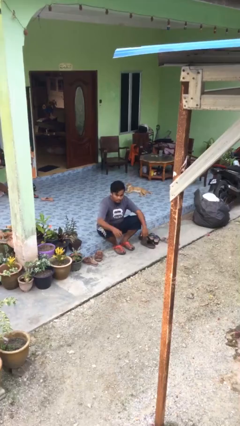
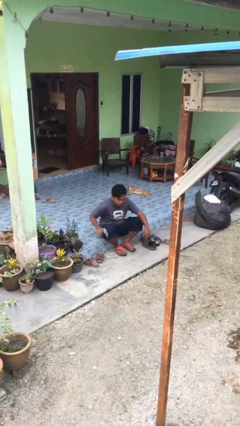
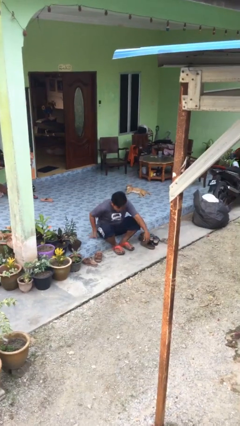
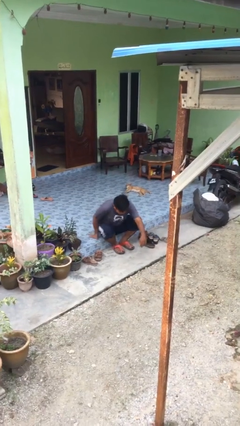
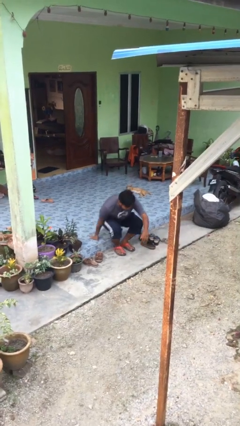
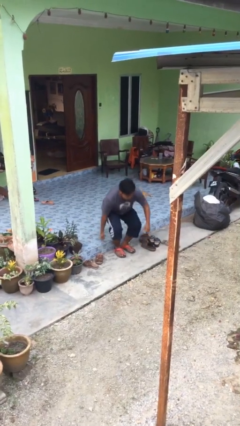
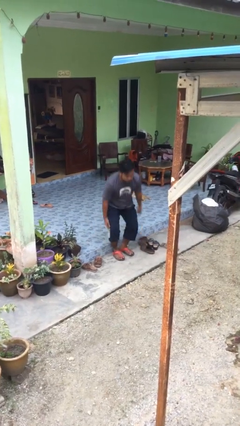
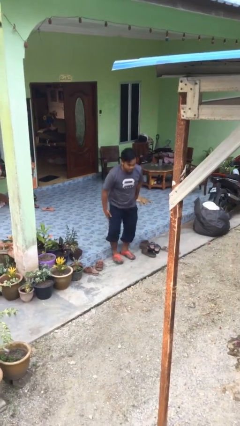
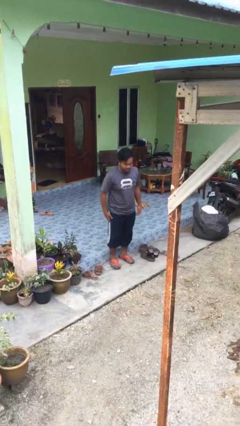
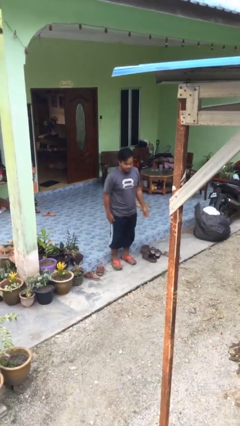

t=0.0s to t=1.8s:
person stands up

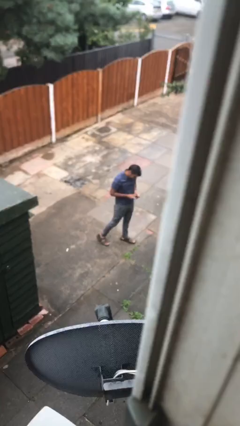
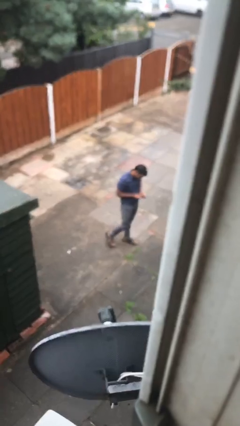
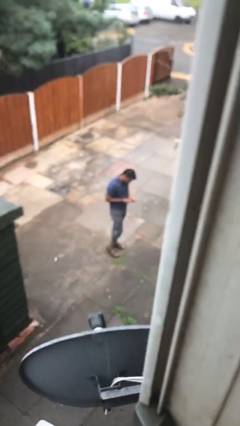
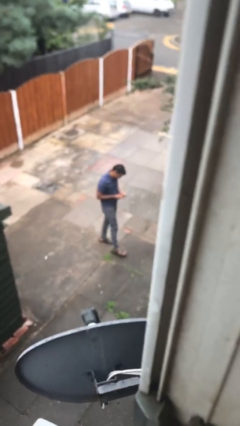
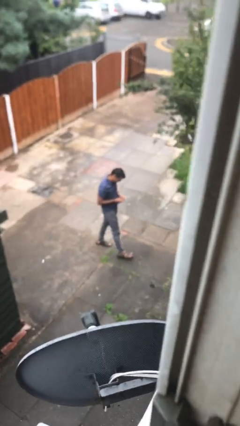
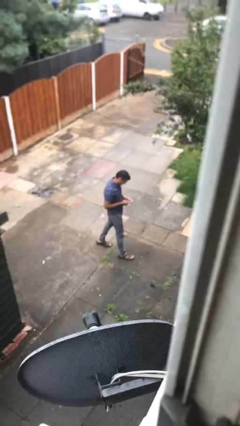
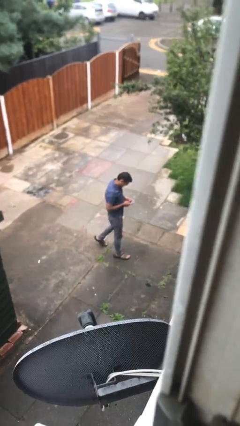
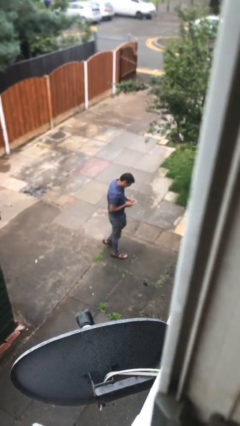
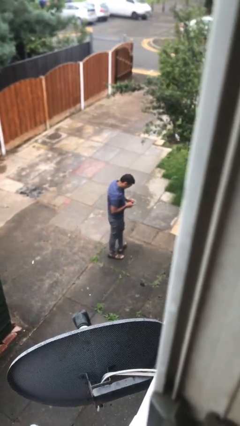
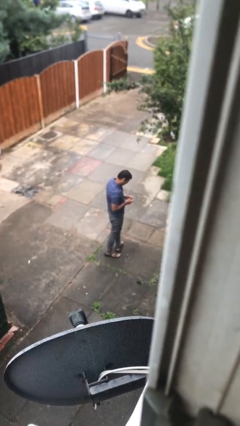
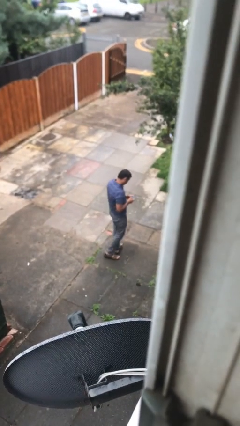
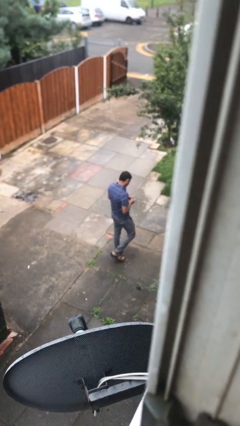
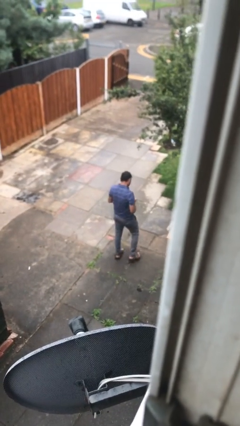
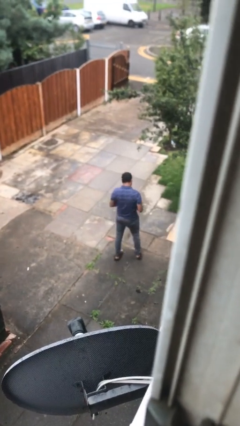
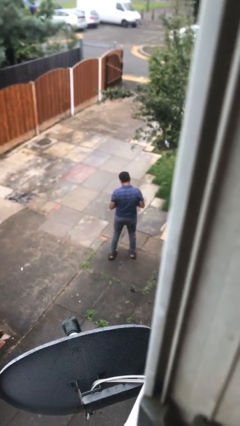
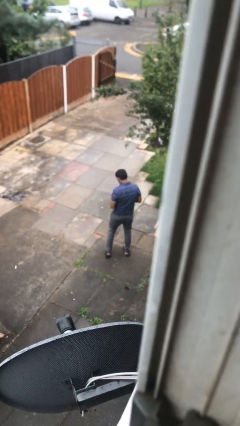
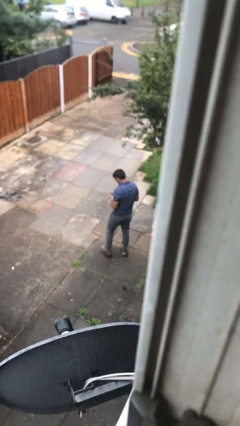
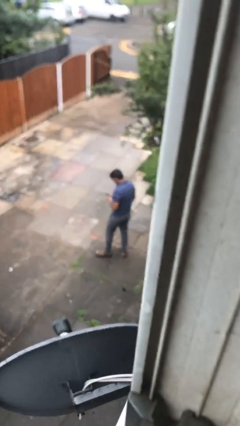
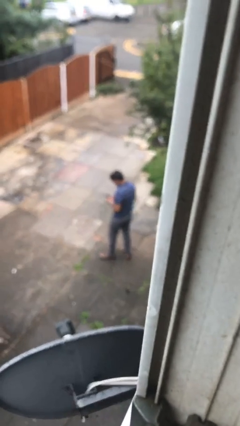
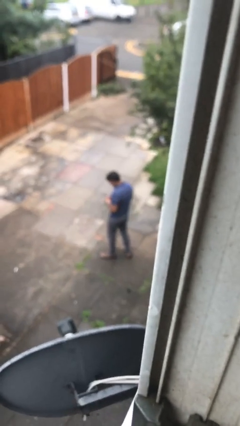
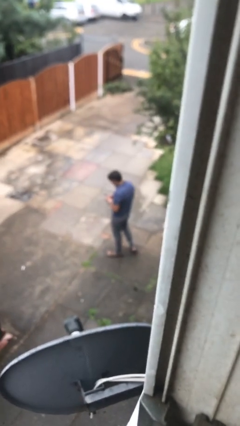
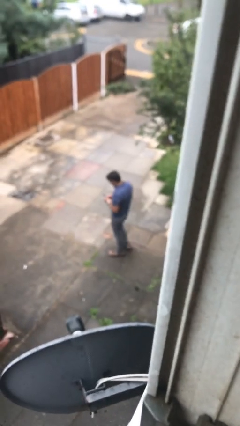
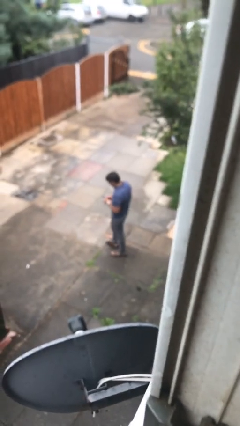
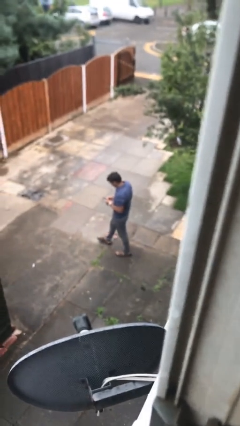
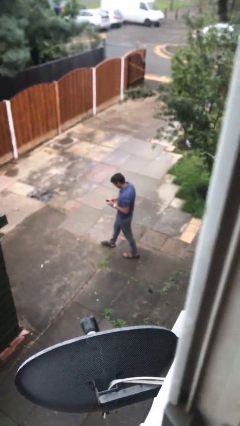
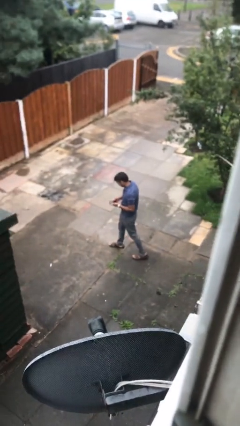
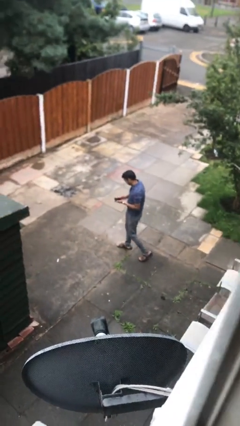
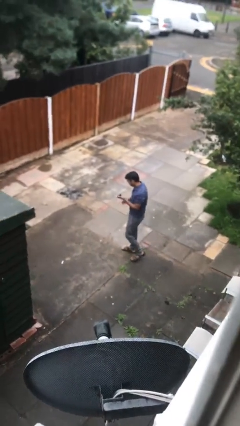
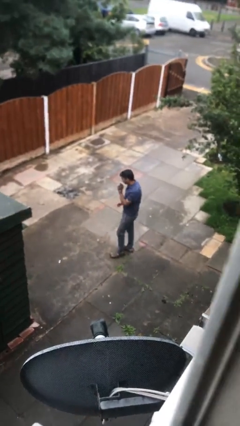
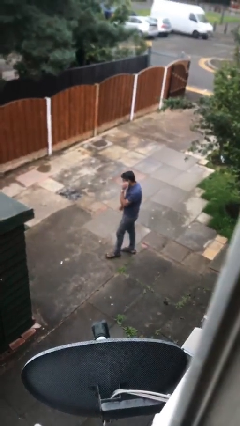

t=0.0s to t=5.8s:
person texts on phone

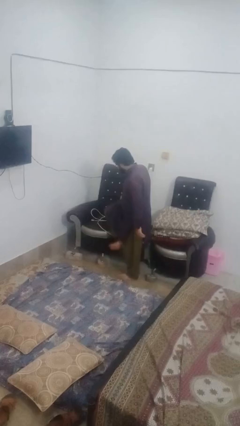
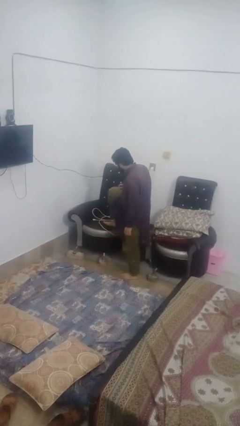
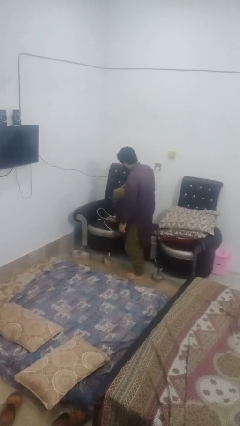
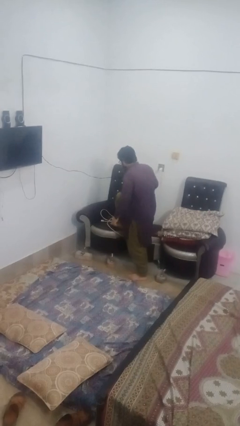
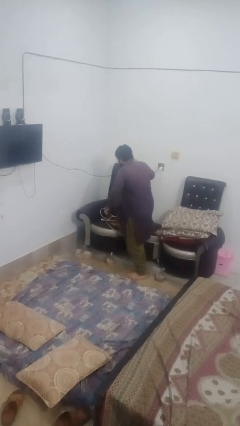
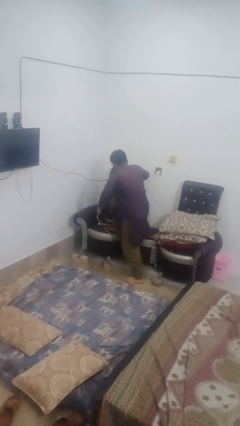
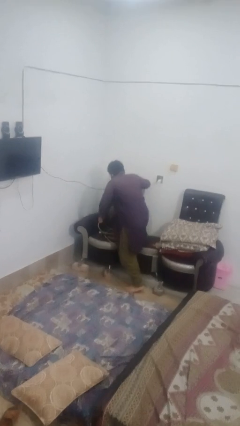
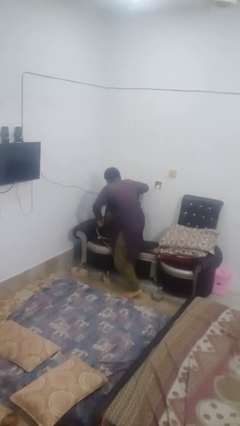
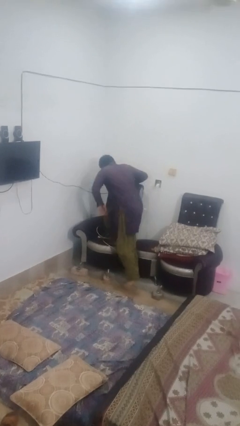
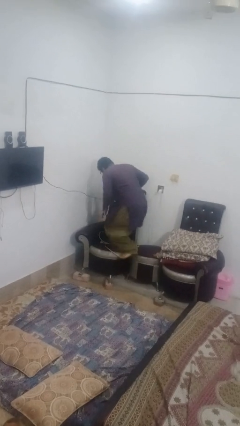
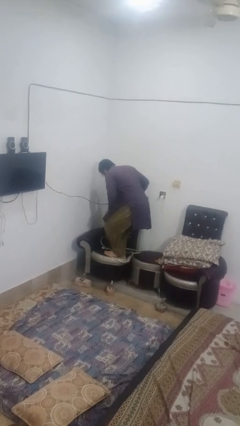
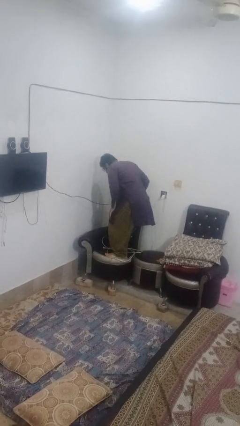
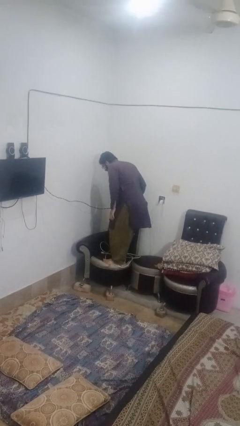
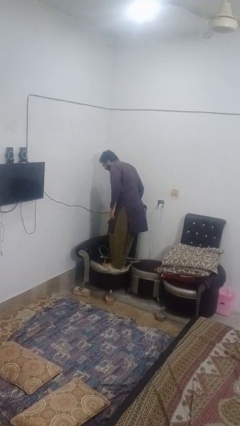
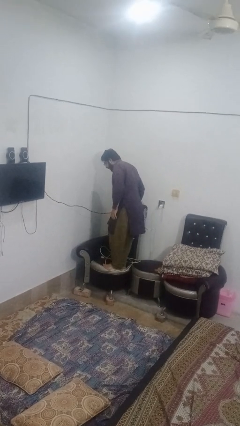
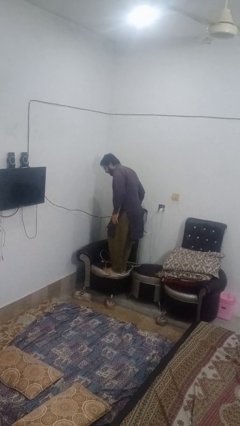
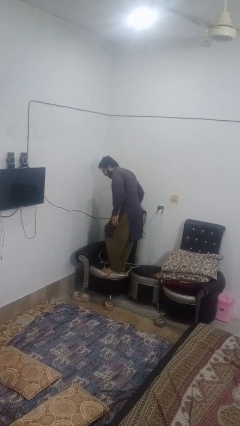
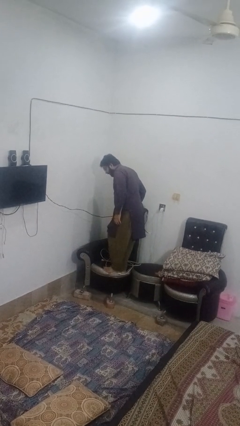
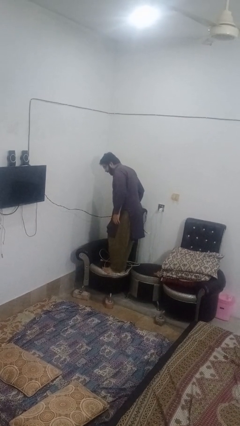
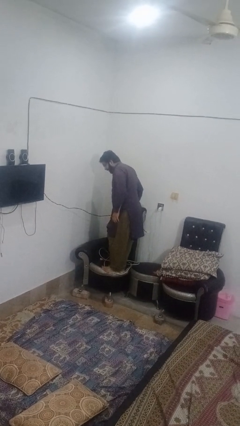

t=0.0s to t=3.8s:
person climbs on couch

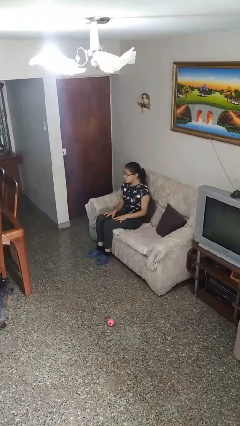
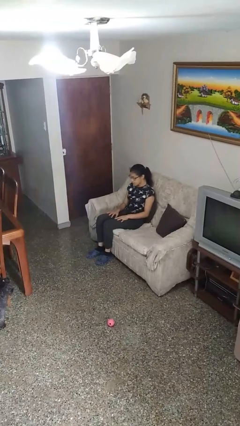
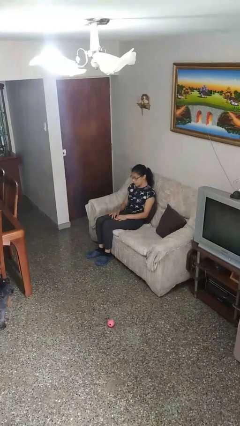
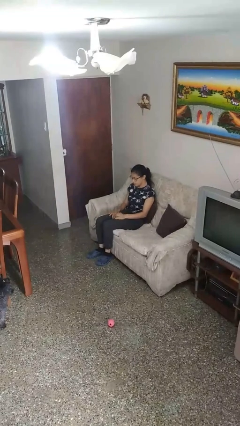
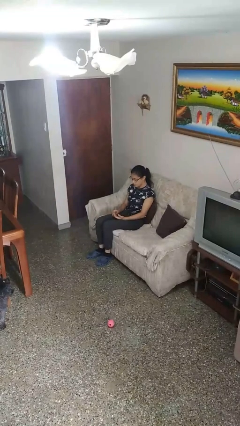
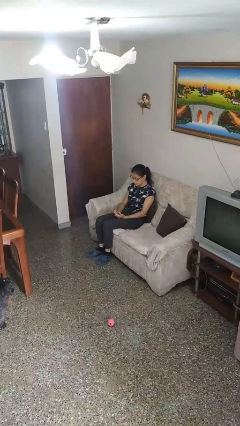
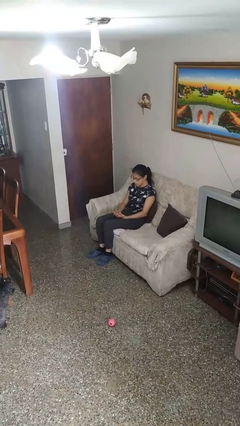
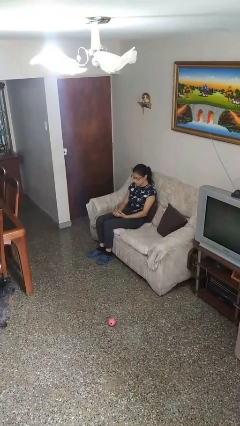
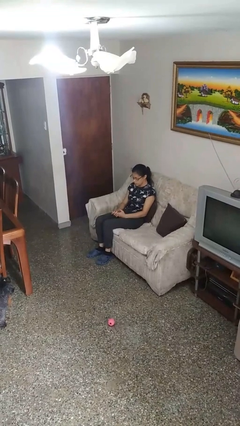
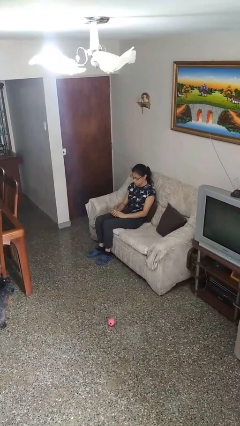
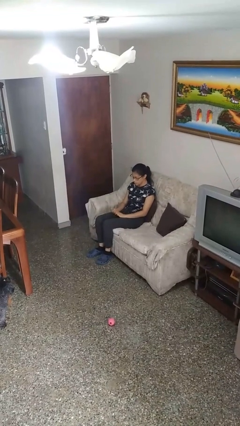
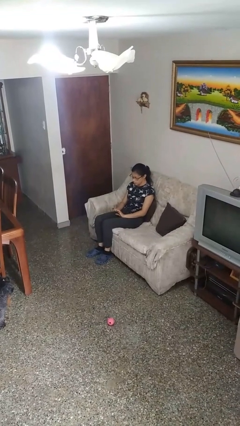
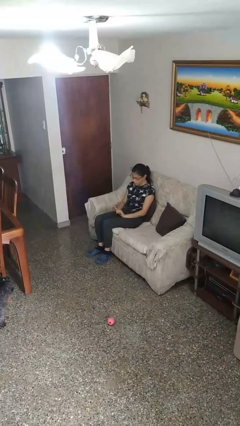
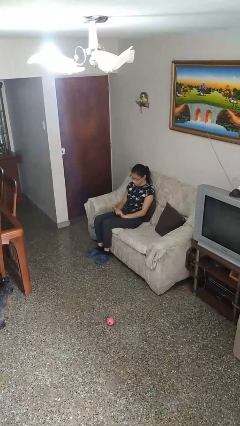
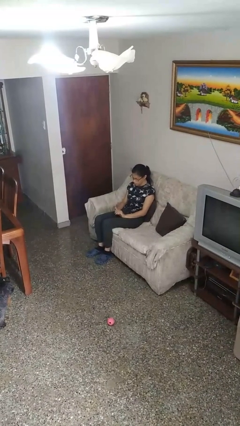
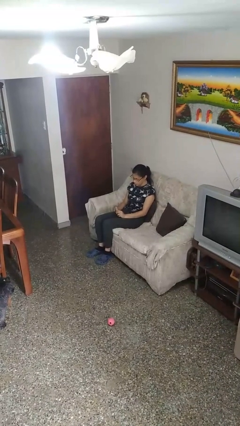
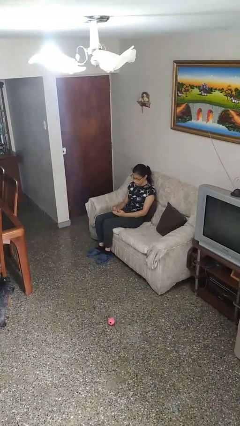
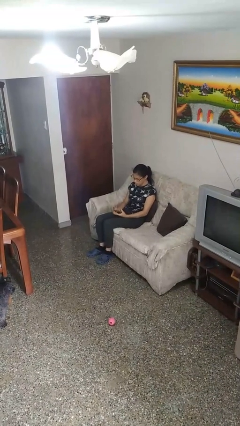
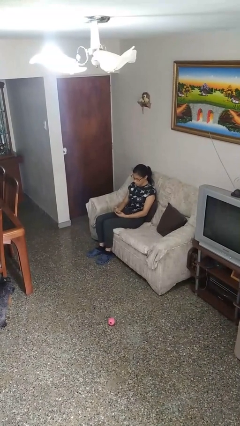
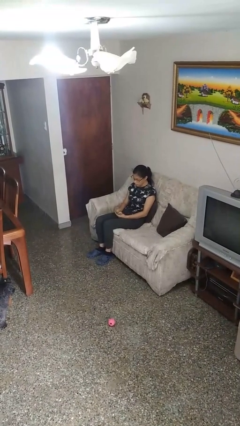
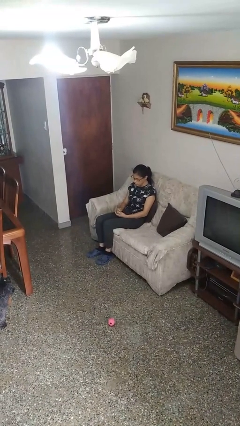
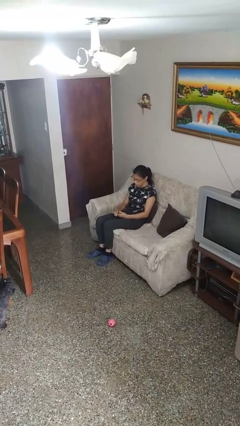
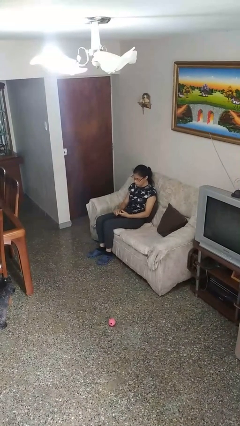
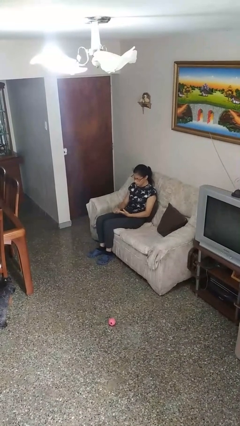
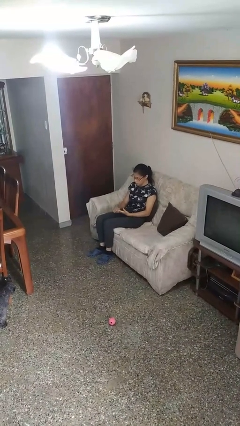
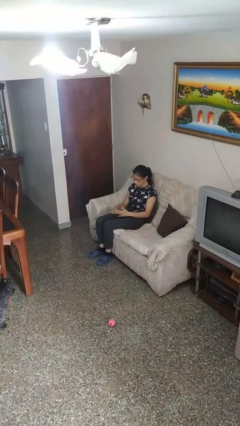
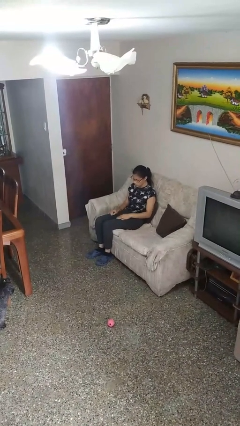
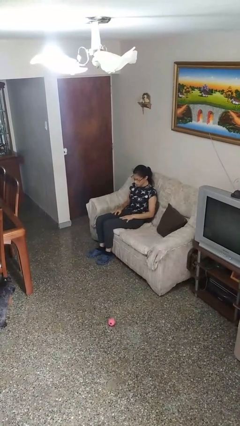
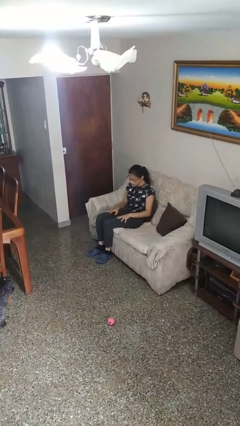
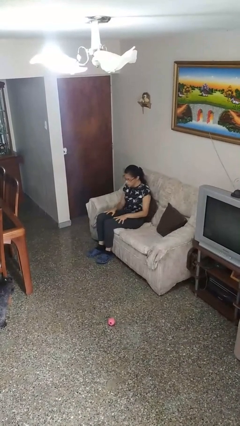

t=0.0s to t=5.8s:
person looks at hands in lap

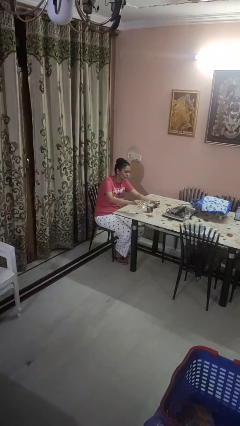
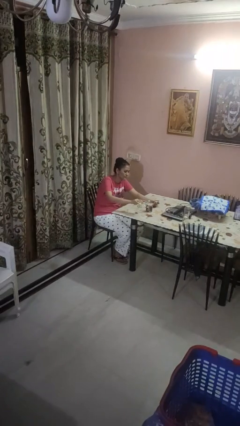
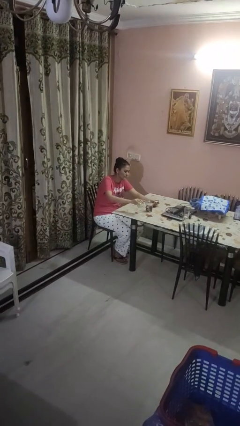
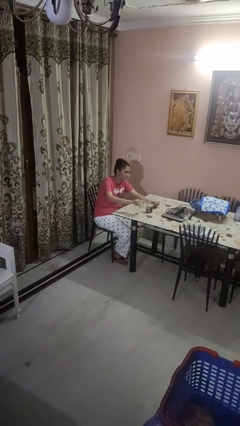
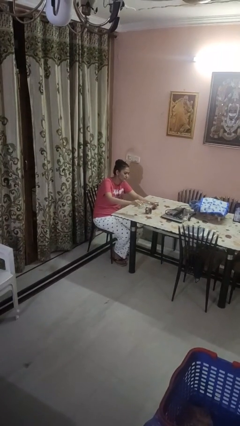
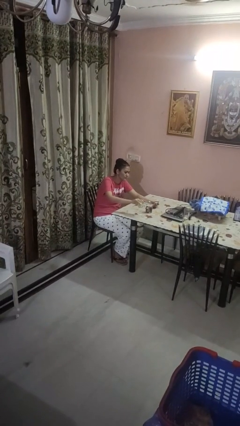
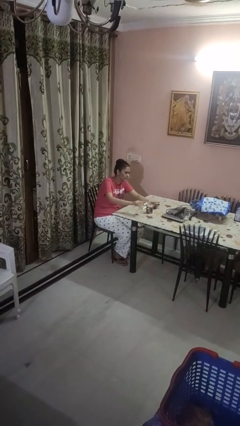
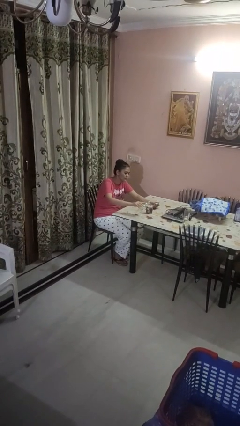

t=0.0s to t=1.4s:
person pours liquid into cup
